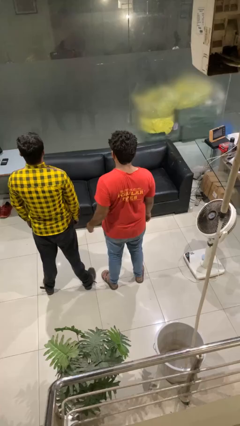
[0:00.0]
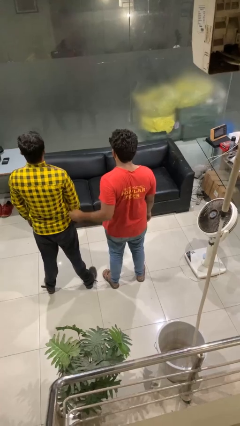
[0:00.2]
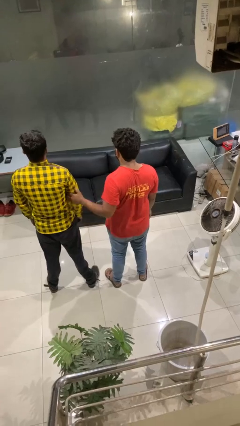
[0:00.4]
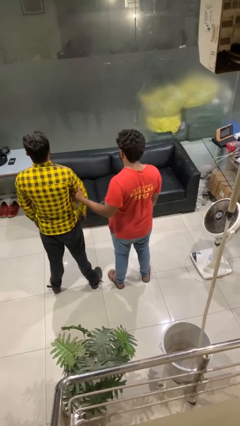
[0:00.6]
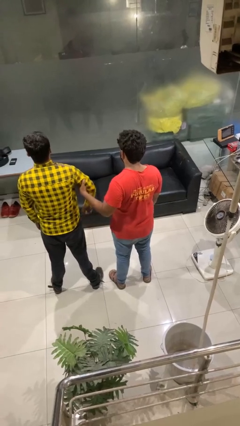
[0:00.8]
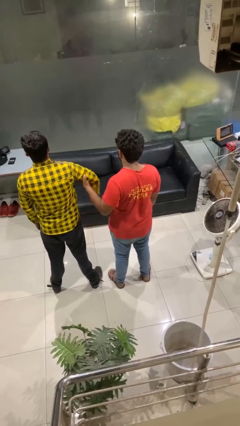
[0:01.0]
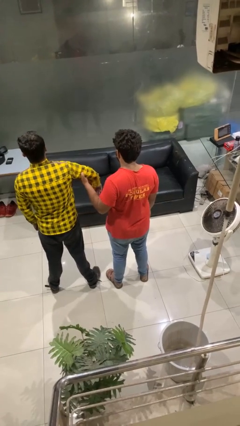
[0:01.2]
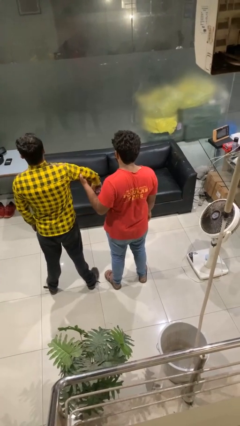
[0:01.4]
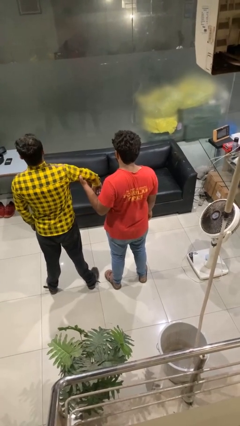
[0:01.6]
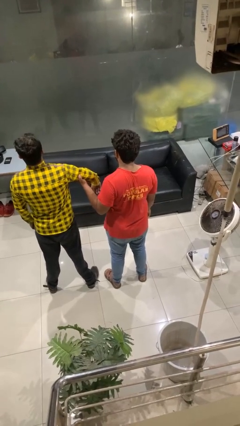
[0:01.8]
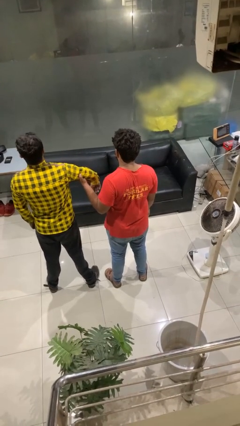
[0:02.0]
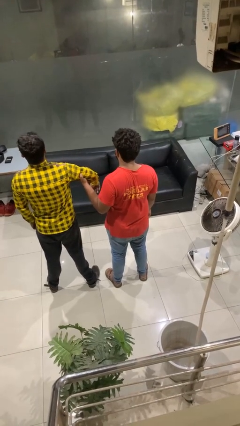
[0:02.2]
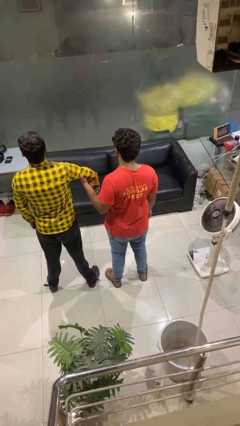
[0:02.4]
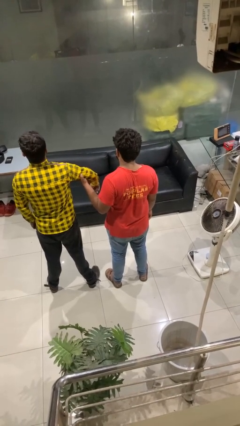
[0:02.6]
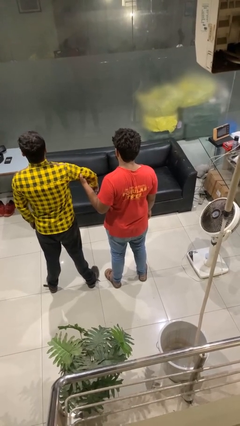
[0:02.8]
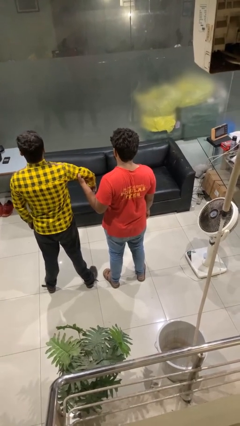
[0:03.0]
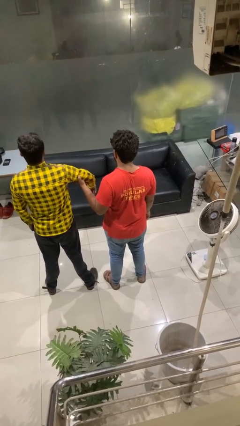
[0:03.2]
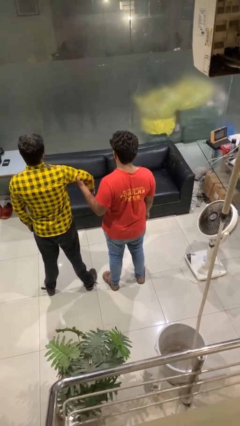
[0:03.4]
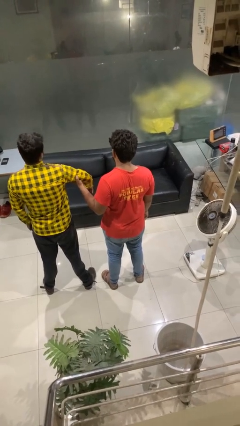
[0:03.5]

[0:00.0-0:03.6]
person grabs person by bicep

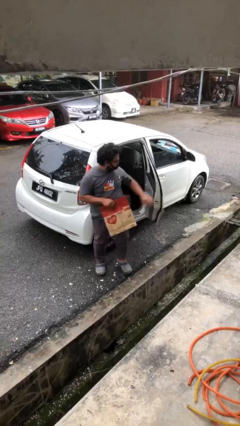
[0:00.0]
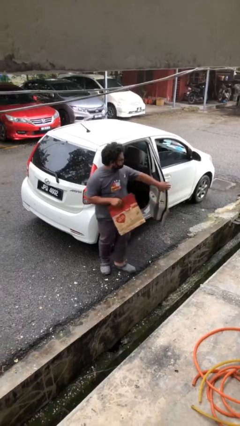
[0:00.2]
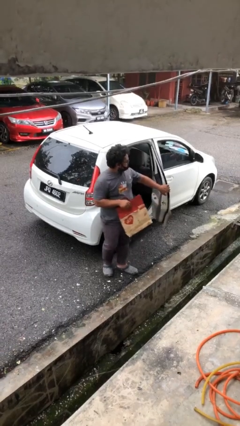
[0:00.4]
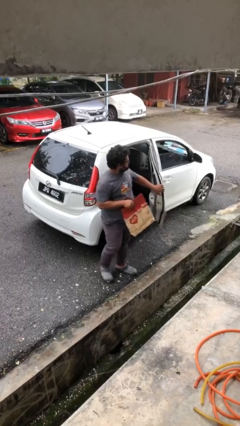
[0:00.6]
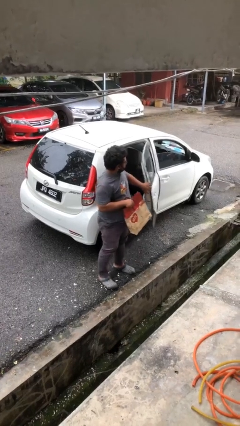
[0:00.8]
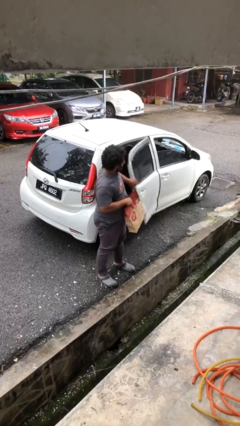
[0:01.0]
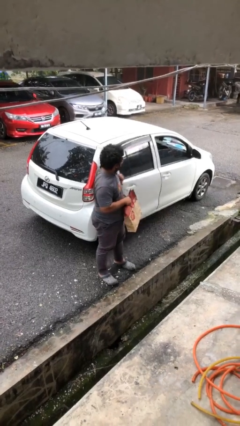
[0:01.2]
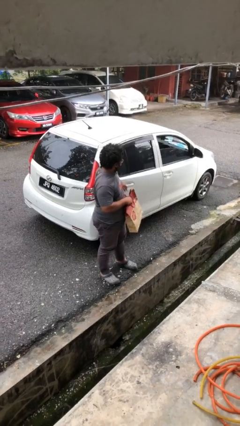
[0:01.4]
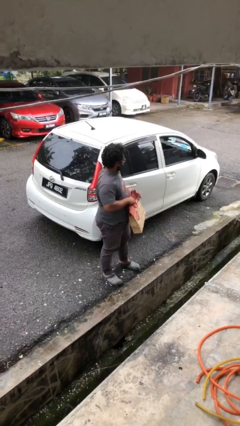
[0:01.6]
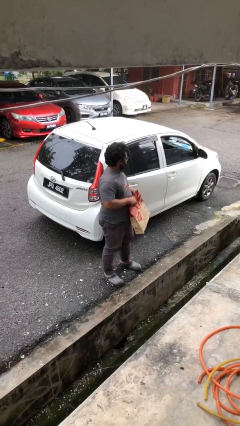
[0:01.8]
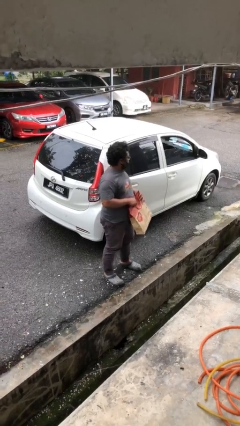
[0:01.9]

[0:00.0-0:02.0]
person closes car door

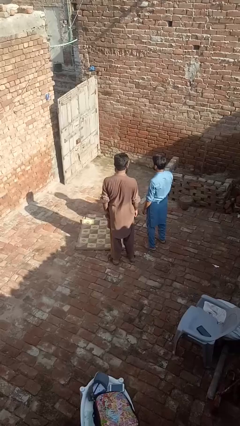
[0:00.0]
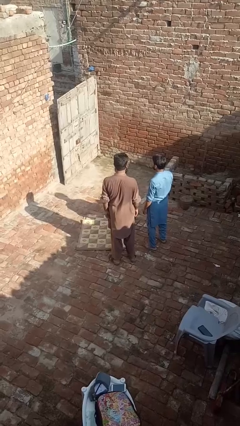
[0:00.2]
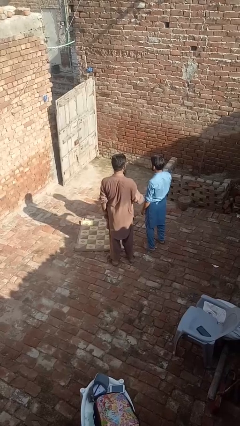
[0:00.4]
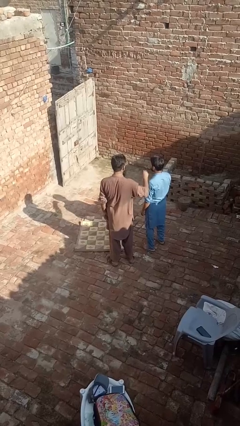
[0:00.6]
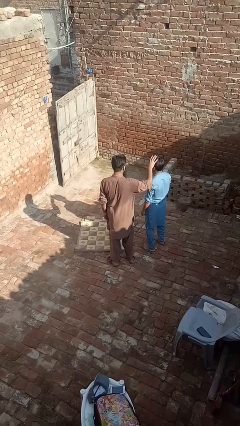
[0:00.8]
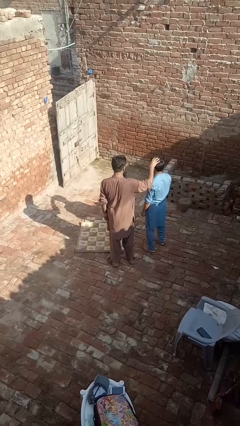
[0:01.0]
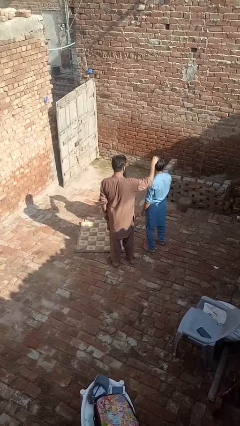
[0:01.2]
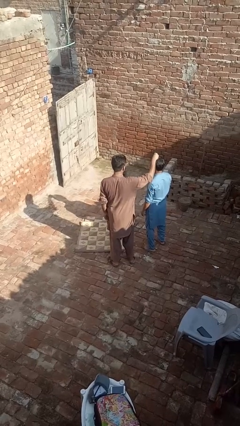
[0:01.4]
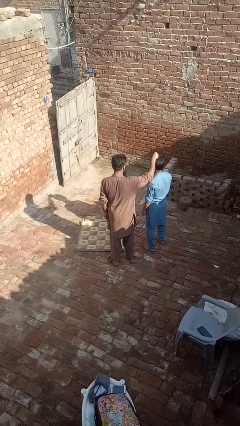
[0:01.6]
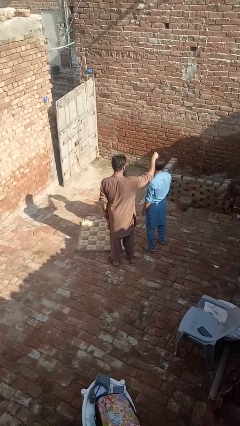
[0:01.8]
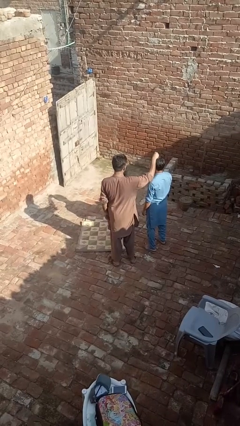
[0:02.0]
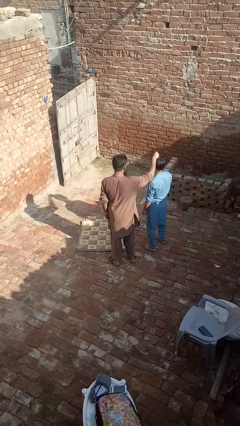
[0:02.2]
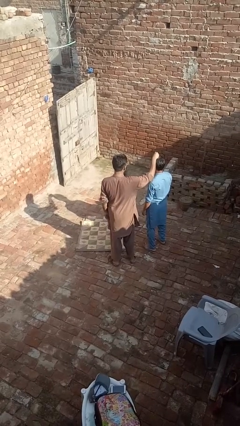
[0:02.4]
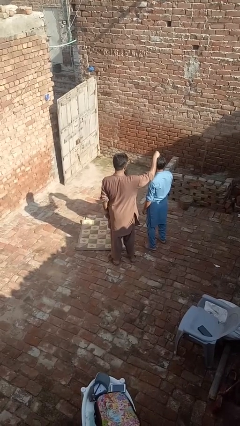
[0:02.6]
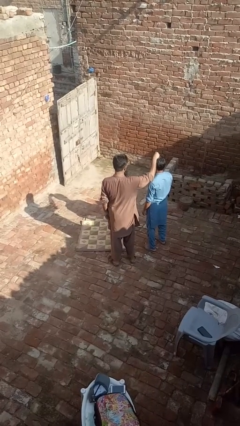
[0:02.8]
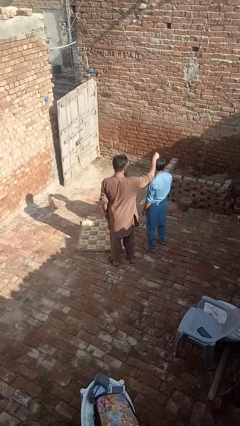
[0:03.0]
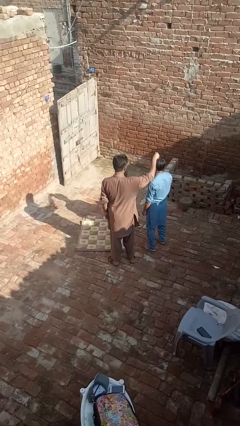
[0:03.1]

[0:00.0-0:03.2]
person grabs person by hair

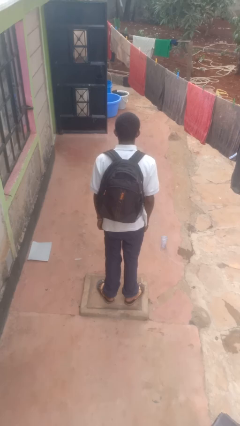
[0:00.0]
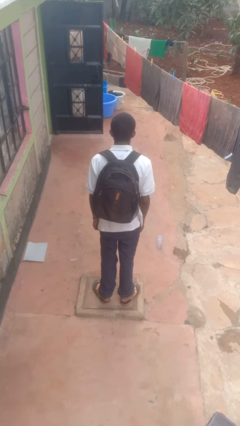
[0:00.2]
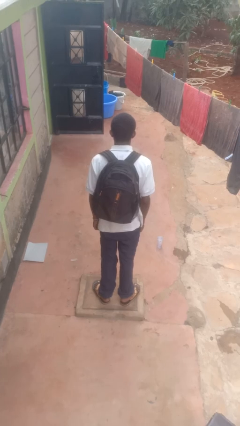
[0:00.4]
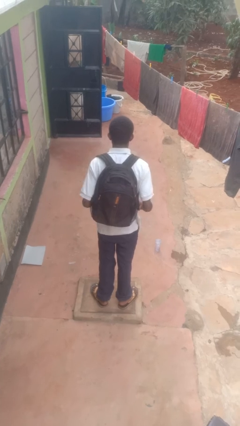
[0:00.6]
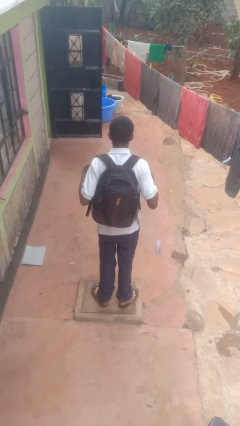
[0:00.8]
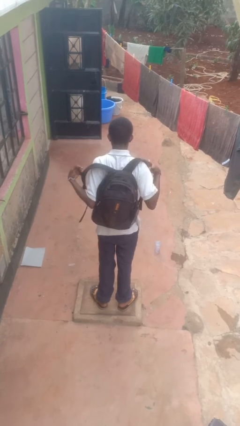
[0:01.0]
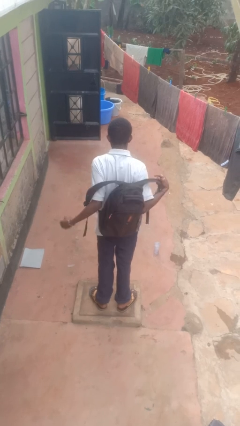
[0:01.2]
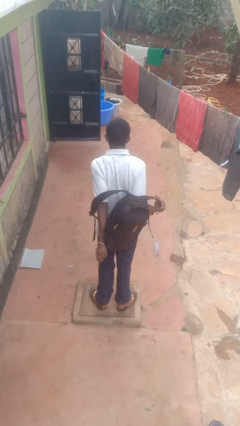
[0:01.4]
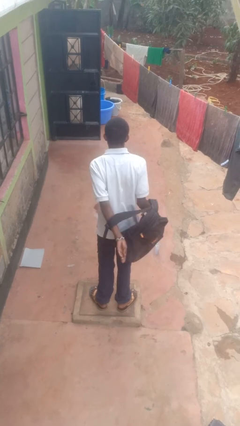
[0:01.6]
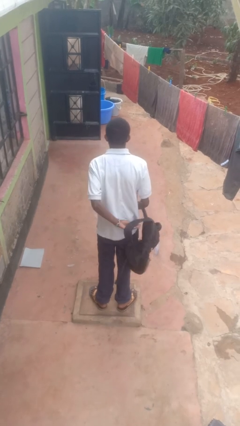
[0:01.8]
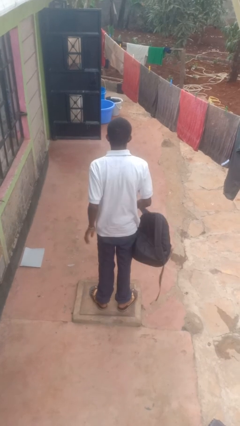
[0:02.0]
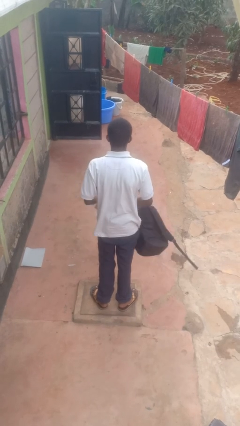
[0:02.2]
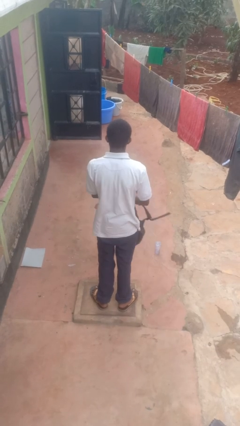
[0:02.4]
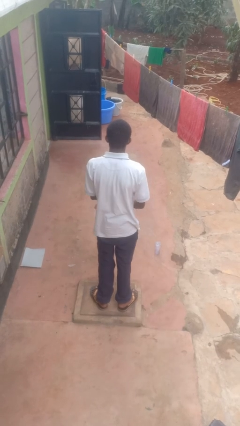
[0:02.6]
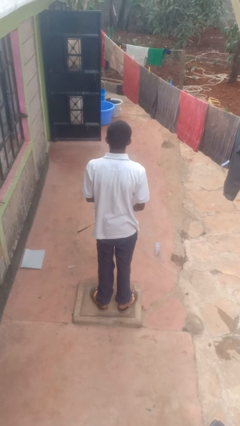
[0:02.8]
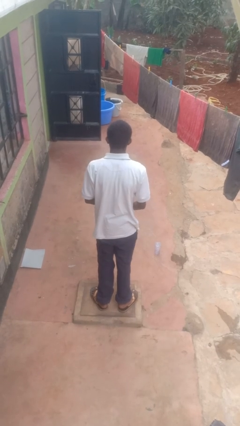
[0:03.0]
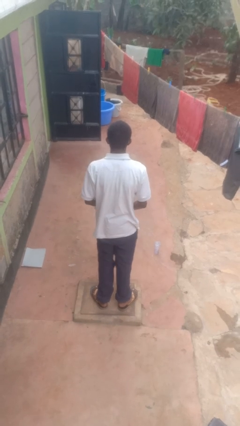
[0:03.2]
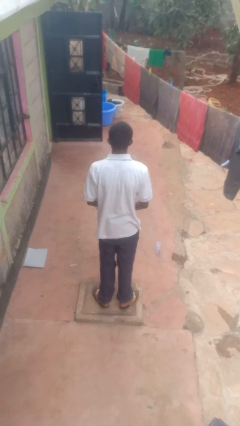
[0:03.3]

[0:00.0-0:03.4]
person takes off backpack

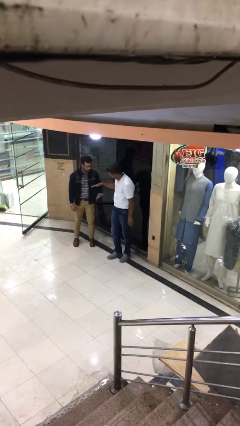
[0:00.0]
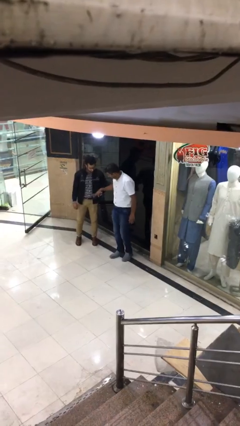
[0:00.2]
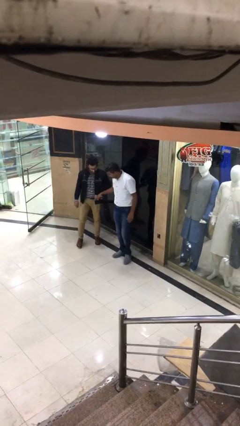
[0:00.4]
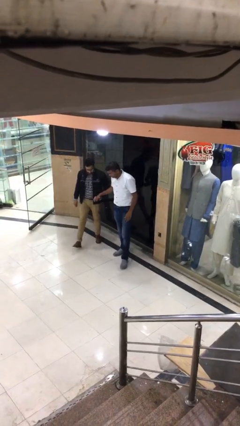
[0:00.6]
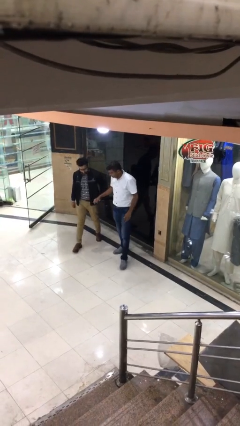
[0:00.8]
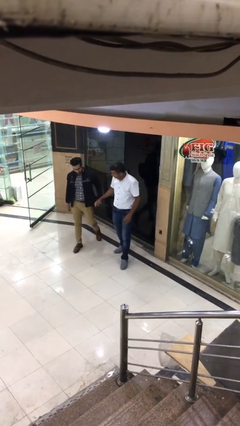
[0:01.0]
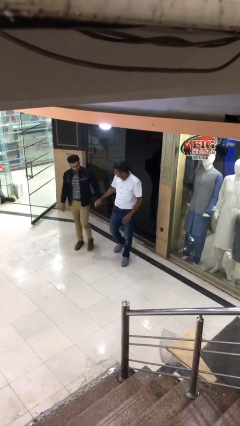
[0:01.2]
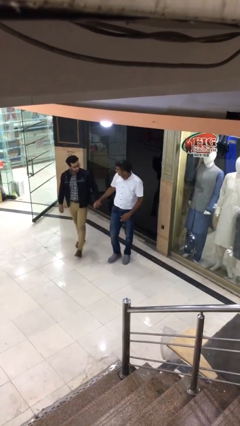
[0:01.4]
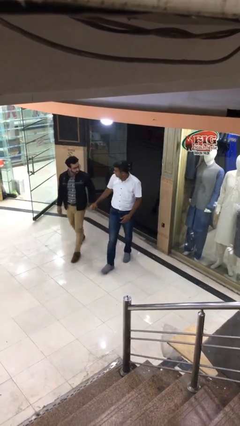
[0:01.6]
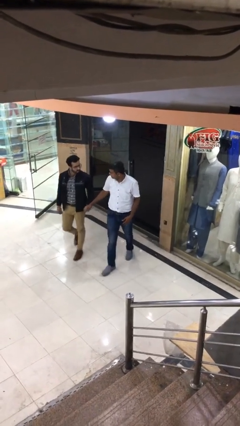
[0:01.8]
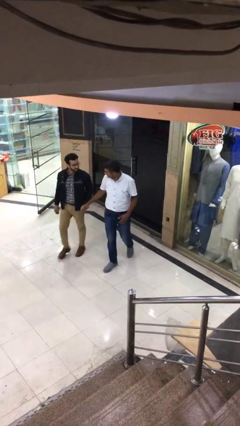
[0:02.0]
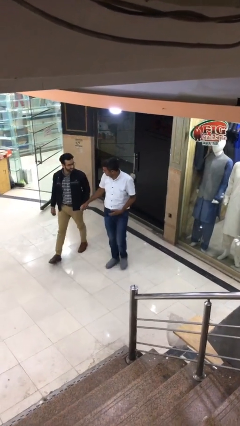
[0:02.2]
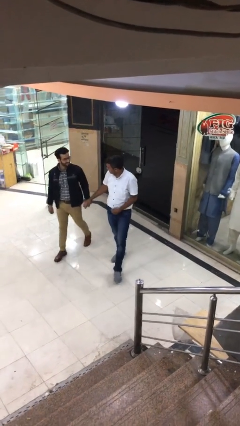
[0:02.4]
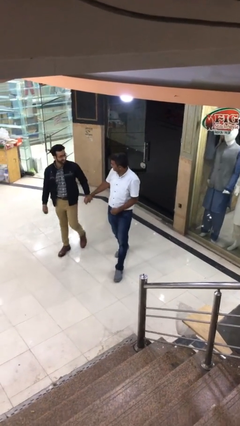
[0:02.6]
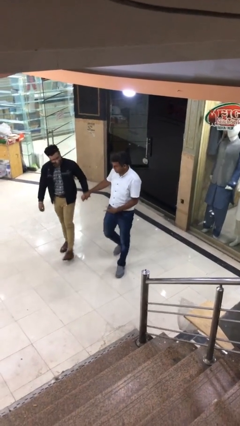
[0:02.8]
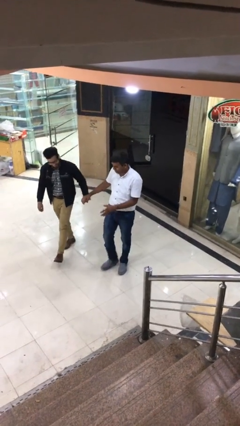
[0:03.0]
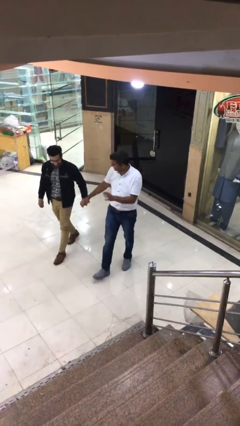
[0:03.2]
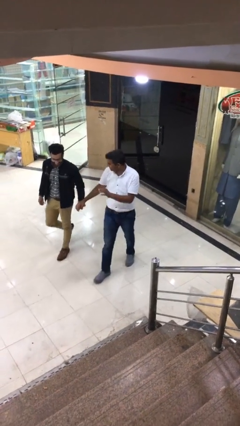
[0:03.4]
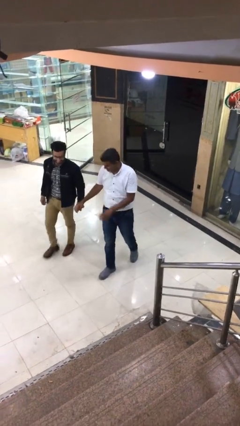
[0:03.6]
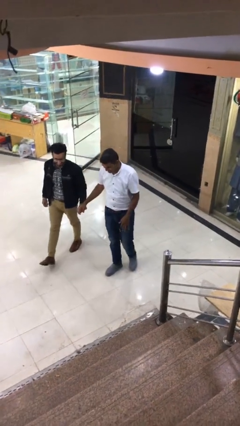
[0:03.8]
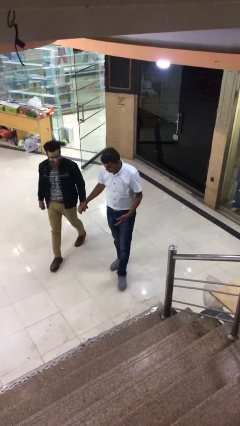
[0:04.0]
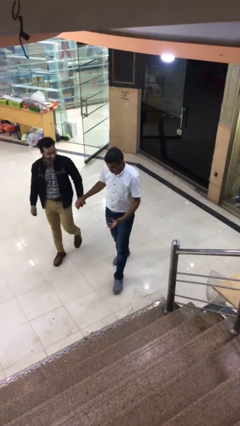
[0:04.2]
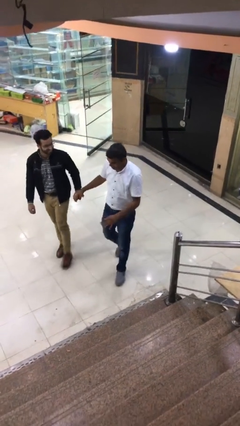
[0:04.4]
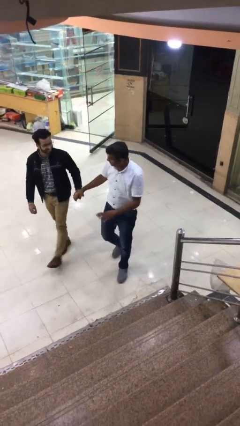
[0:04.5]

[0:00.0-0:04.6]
person holds hand
